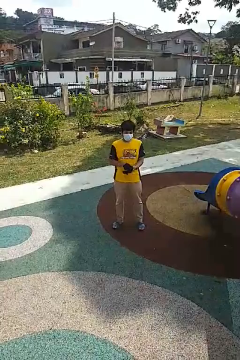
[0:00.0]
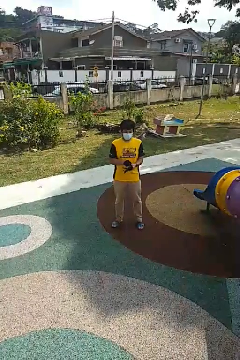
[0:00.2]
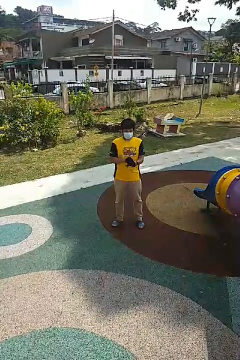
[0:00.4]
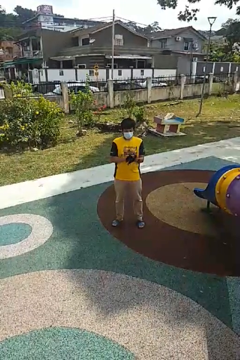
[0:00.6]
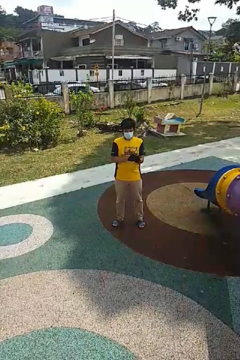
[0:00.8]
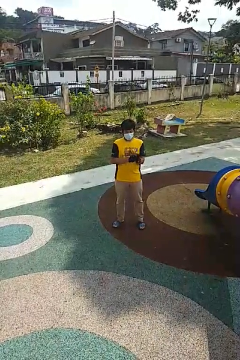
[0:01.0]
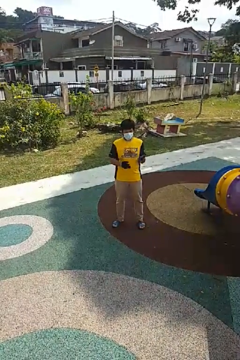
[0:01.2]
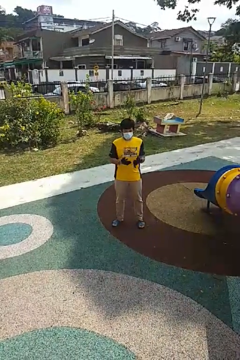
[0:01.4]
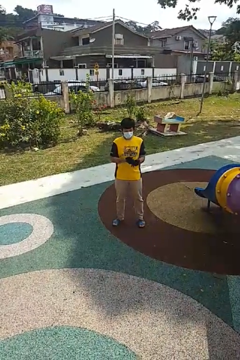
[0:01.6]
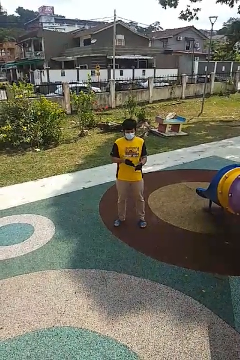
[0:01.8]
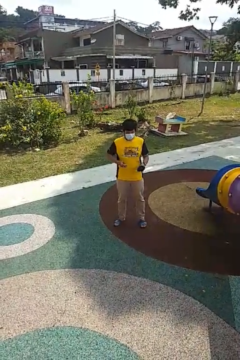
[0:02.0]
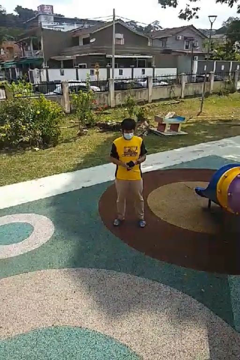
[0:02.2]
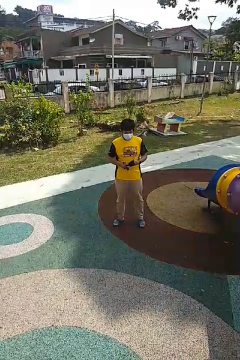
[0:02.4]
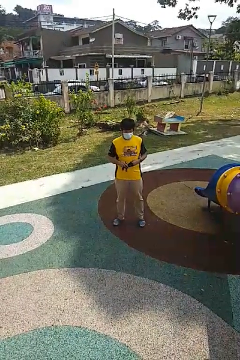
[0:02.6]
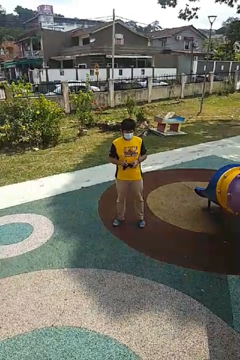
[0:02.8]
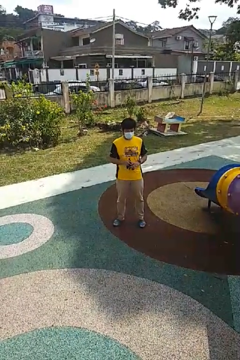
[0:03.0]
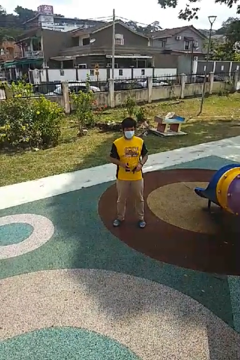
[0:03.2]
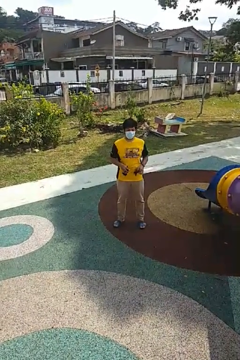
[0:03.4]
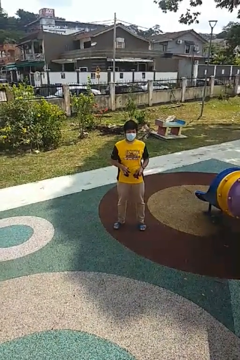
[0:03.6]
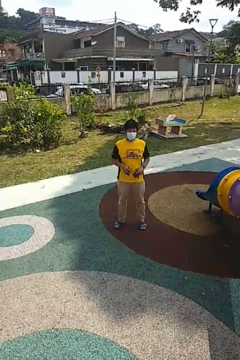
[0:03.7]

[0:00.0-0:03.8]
person takes off gloves

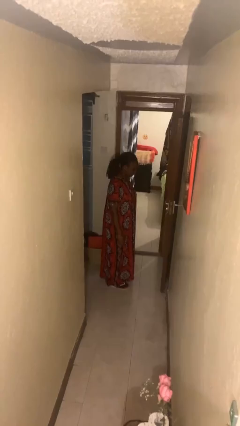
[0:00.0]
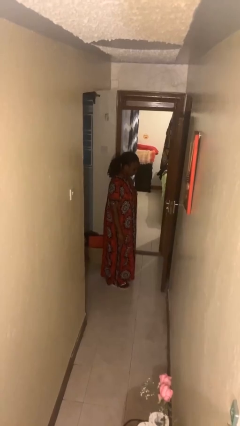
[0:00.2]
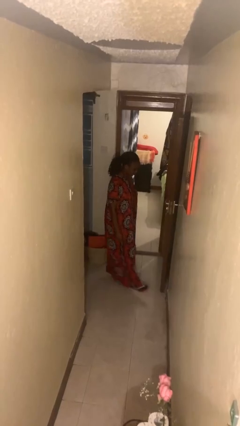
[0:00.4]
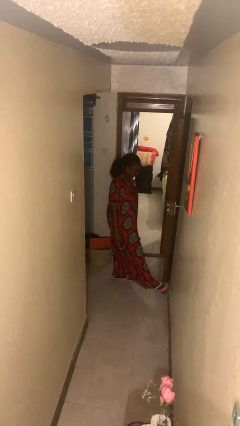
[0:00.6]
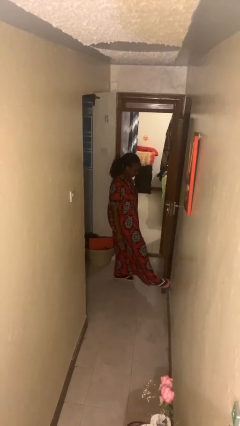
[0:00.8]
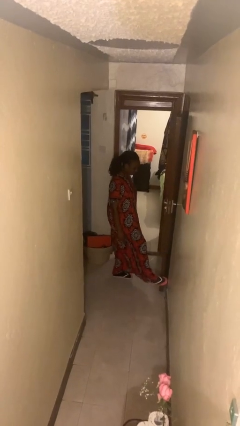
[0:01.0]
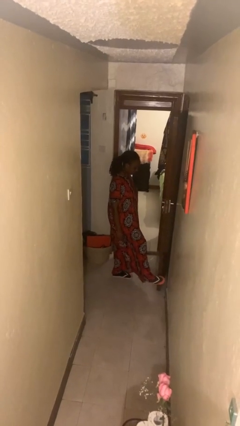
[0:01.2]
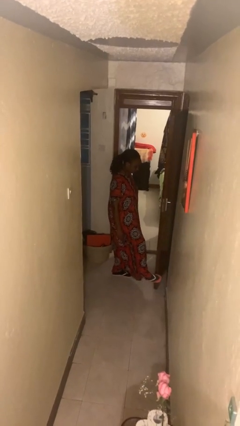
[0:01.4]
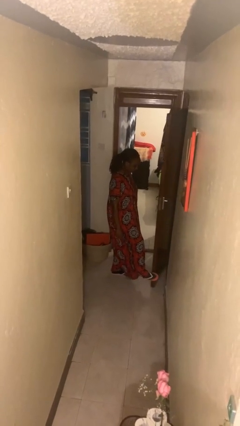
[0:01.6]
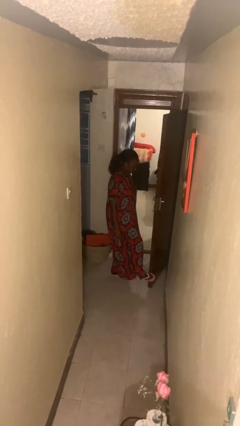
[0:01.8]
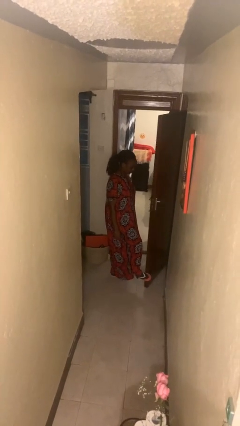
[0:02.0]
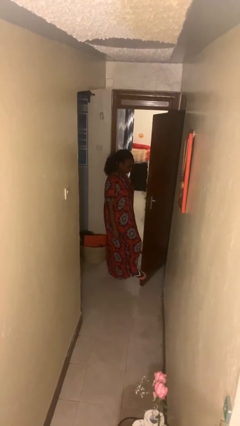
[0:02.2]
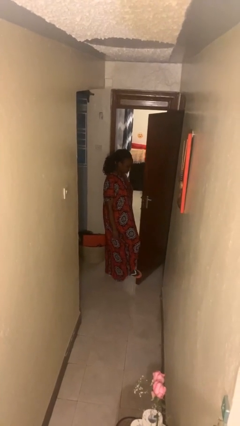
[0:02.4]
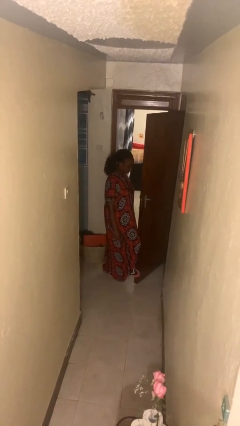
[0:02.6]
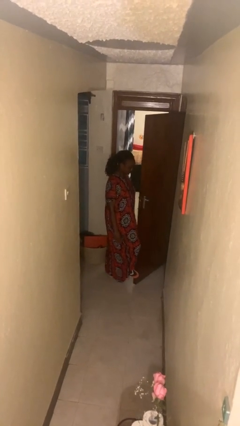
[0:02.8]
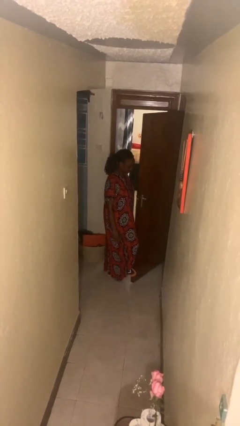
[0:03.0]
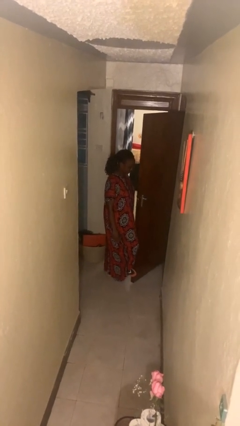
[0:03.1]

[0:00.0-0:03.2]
person opens facility door

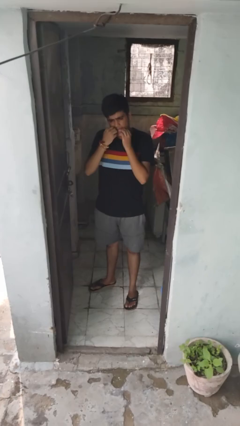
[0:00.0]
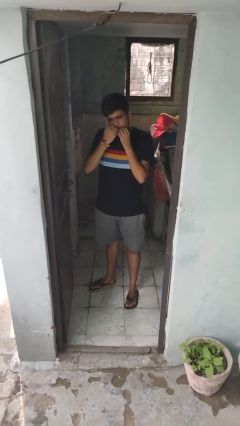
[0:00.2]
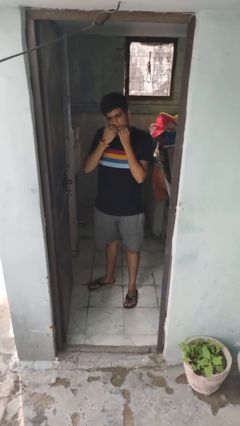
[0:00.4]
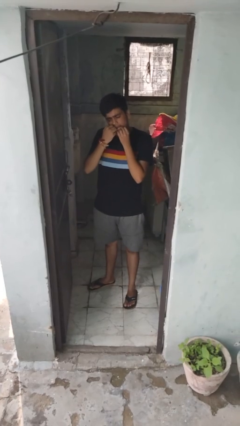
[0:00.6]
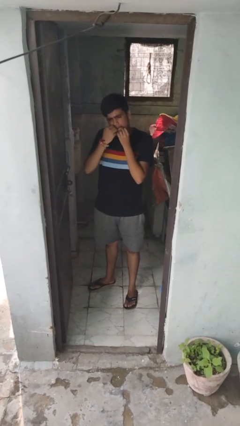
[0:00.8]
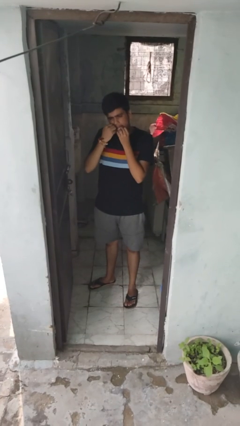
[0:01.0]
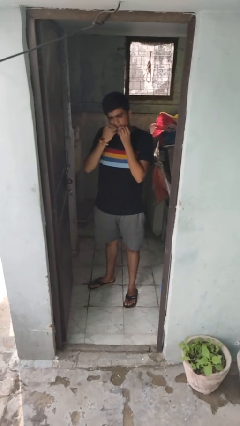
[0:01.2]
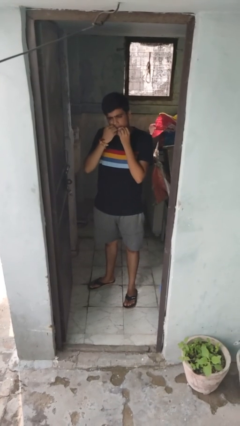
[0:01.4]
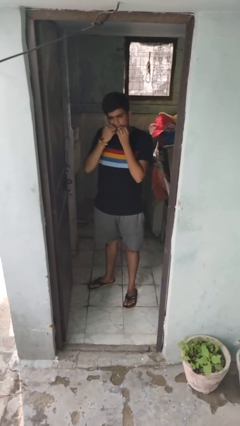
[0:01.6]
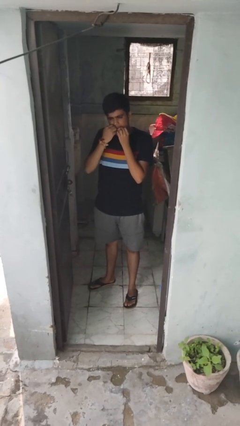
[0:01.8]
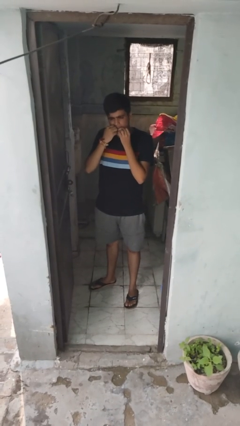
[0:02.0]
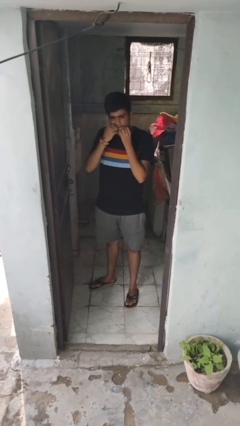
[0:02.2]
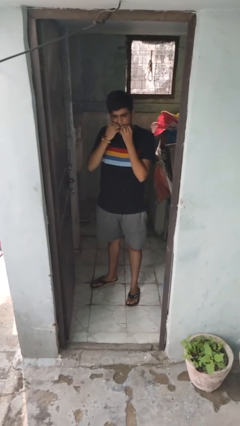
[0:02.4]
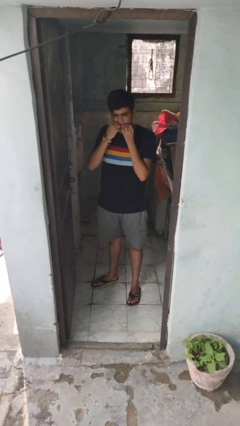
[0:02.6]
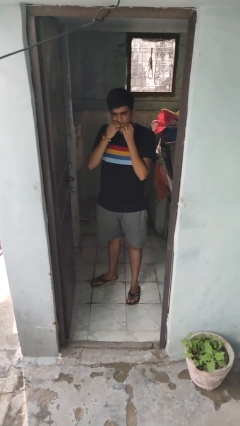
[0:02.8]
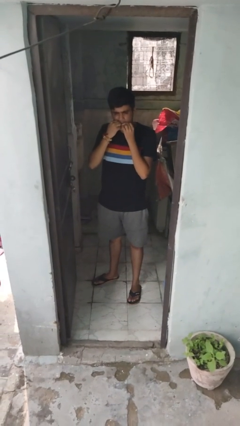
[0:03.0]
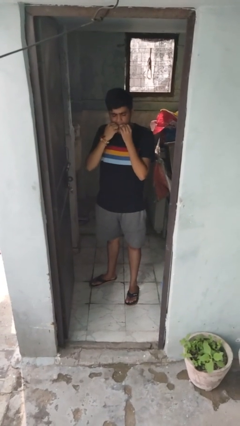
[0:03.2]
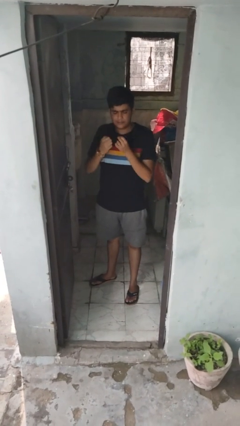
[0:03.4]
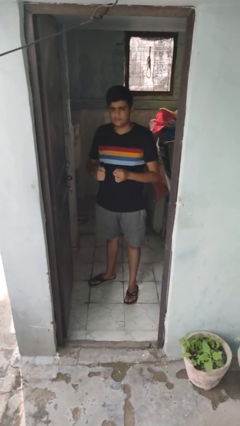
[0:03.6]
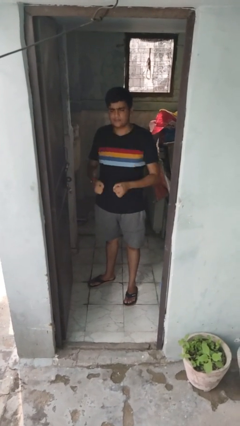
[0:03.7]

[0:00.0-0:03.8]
person flosses

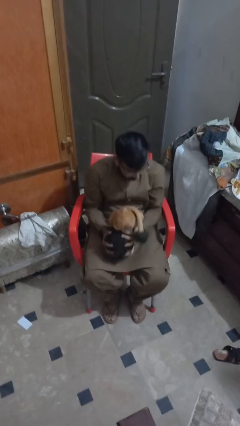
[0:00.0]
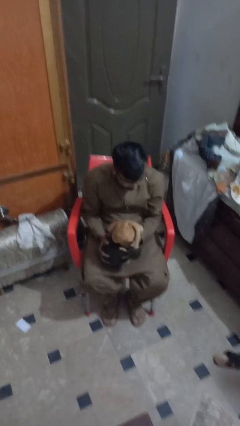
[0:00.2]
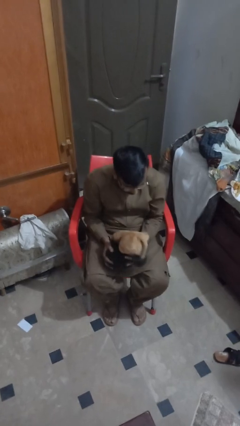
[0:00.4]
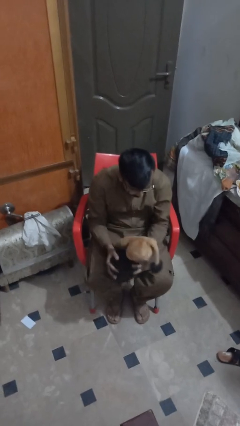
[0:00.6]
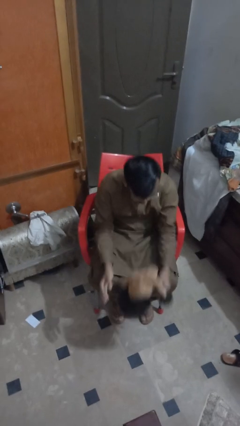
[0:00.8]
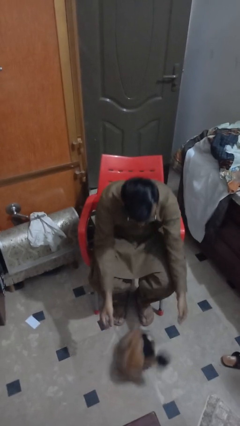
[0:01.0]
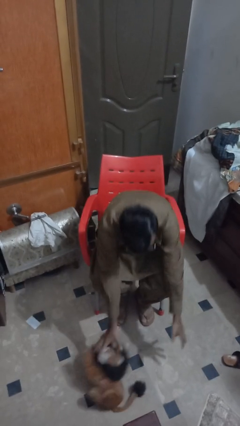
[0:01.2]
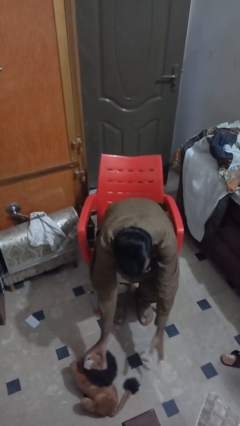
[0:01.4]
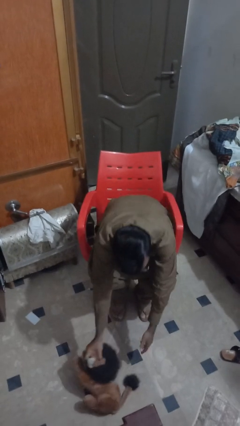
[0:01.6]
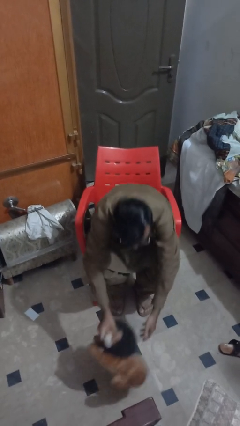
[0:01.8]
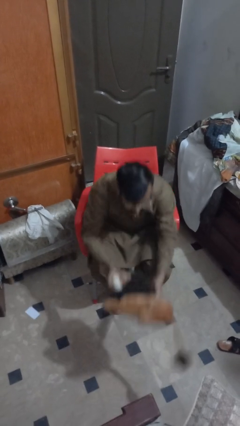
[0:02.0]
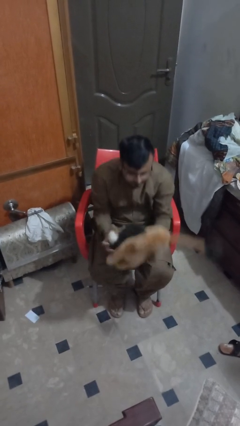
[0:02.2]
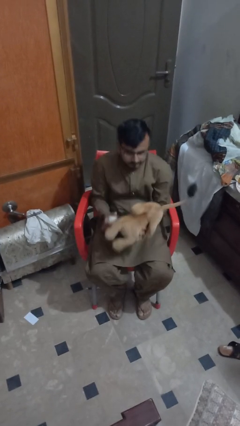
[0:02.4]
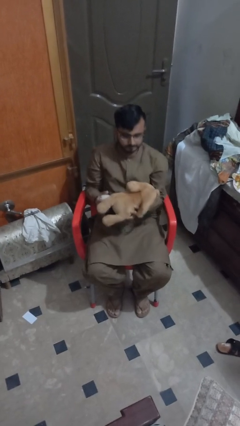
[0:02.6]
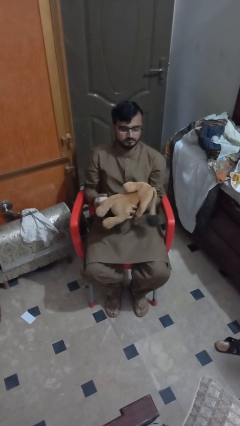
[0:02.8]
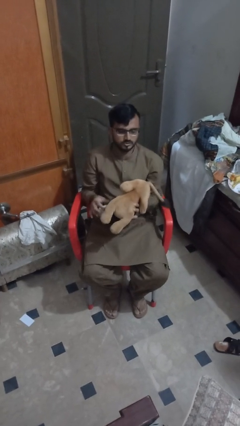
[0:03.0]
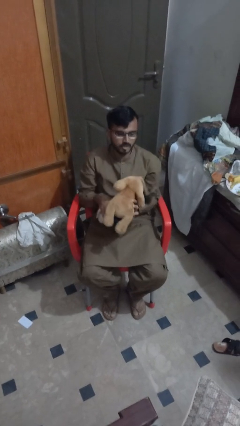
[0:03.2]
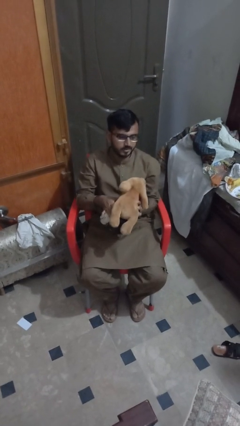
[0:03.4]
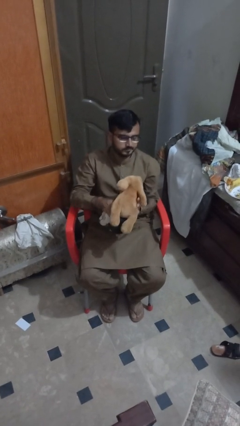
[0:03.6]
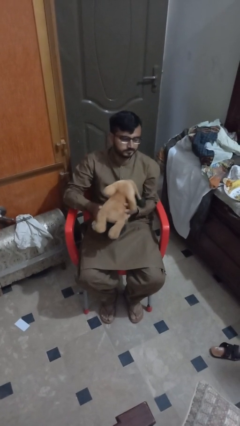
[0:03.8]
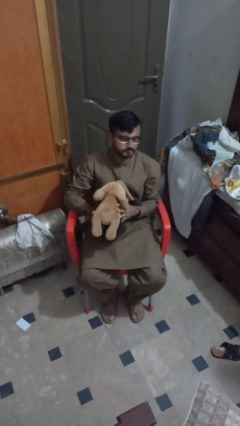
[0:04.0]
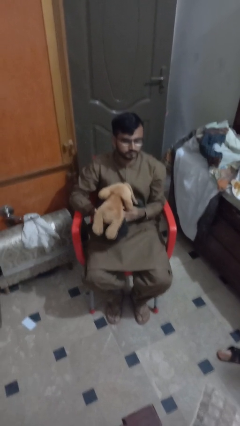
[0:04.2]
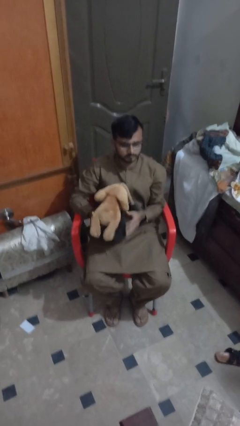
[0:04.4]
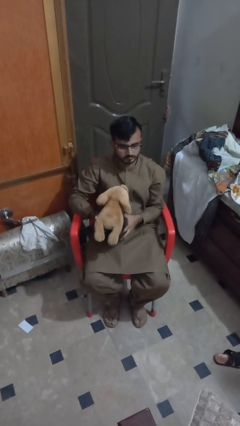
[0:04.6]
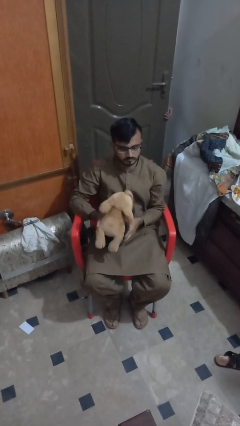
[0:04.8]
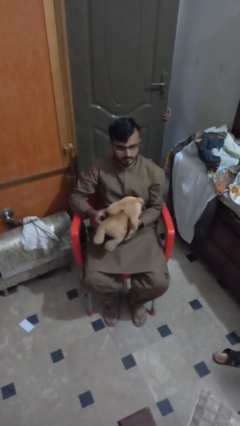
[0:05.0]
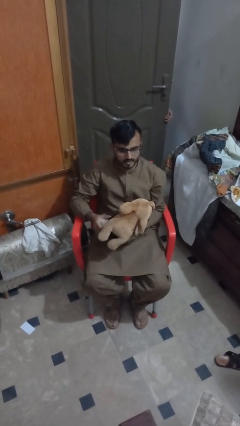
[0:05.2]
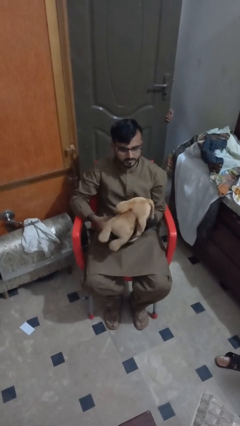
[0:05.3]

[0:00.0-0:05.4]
person picks up object from floor

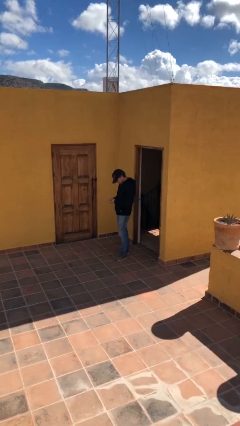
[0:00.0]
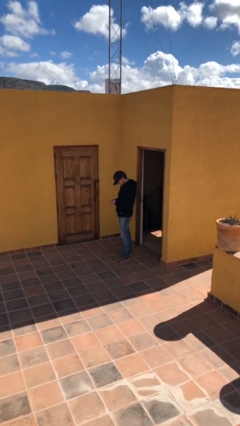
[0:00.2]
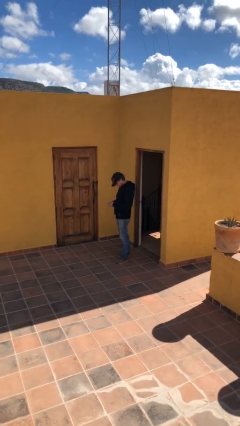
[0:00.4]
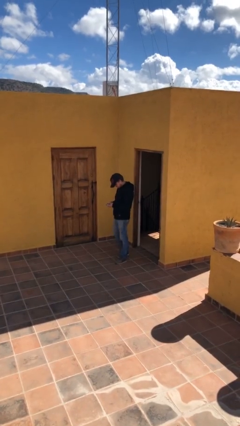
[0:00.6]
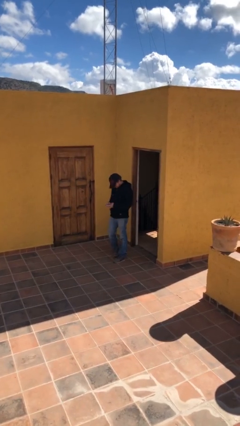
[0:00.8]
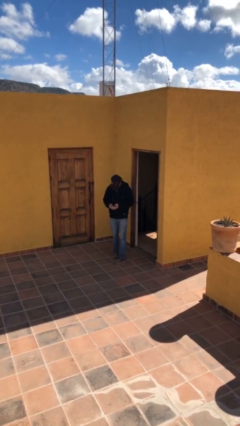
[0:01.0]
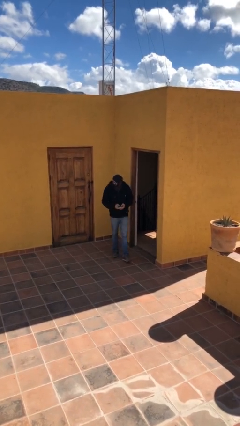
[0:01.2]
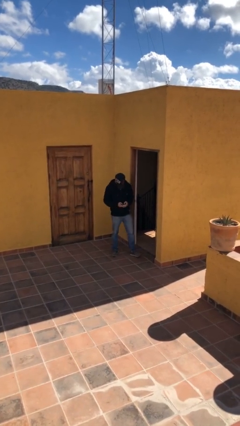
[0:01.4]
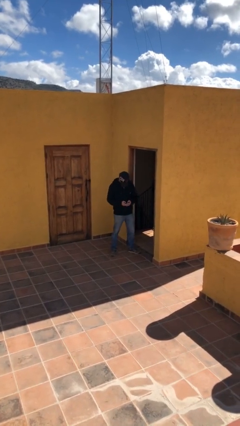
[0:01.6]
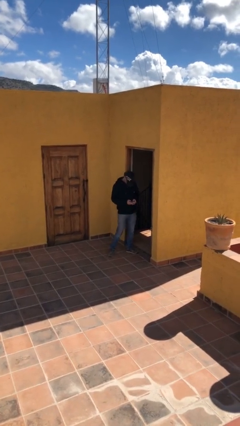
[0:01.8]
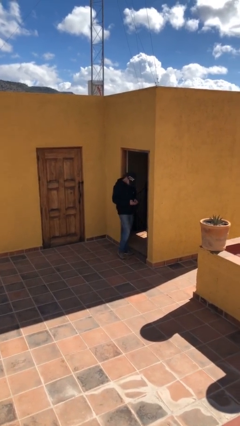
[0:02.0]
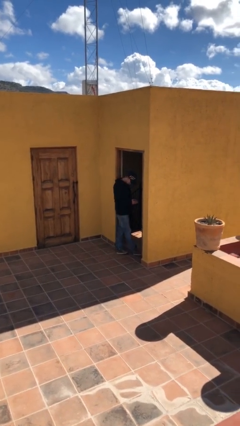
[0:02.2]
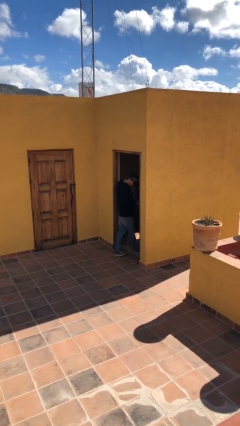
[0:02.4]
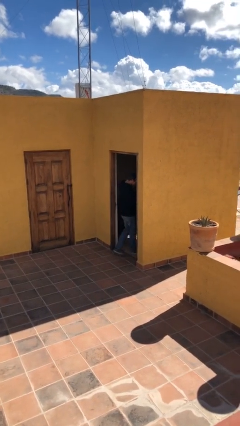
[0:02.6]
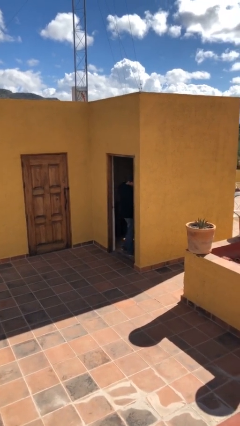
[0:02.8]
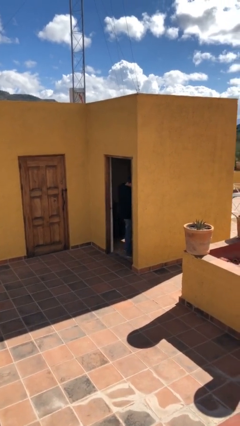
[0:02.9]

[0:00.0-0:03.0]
person exits scene through structure
